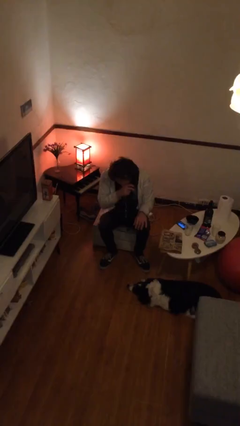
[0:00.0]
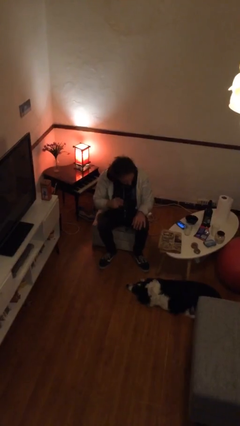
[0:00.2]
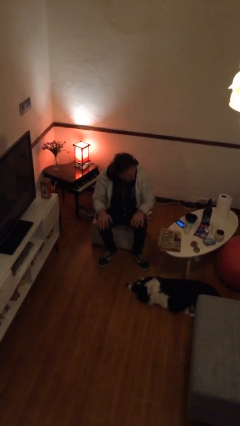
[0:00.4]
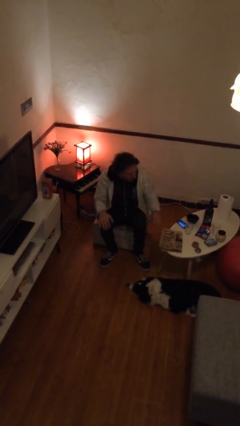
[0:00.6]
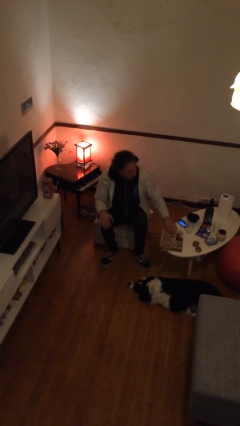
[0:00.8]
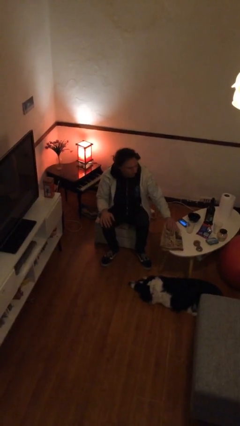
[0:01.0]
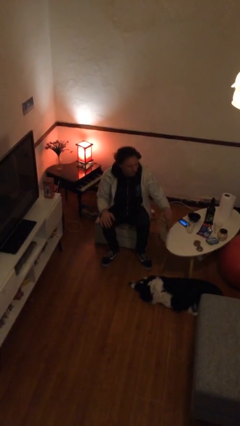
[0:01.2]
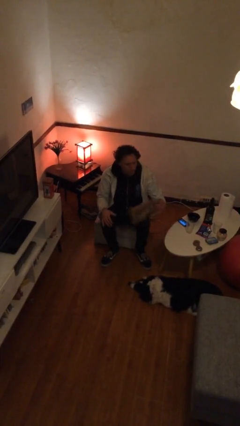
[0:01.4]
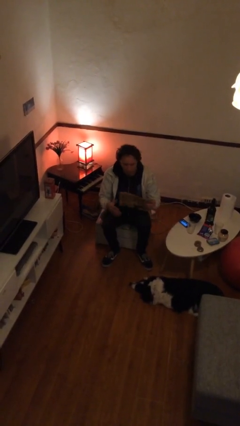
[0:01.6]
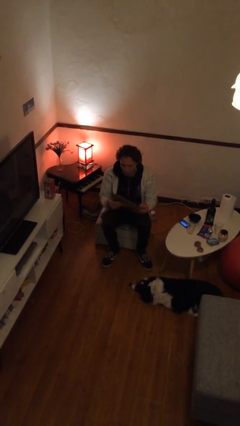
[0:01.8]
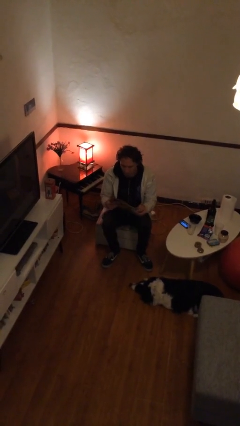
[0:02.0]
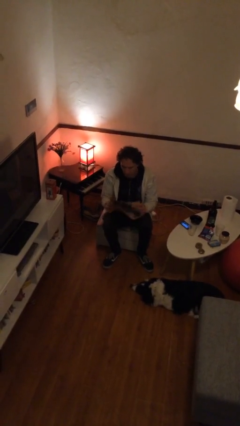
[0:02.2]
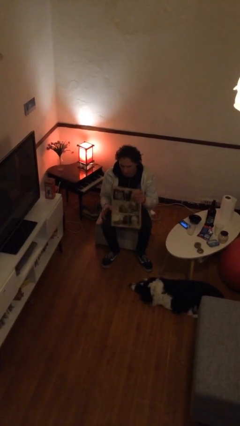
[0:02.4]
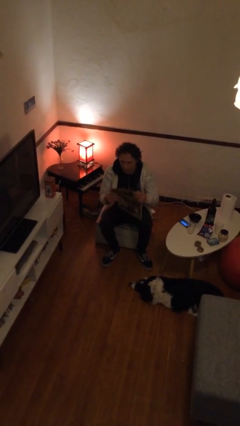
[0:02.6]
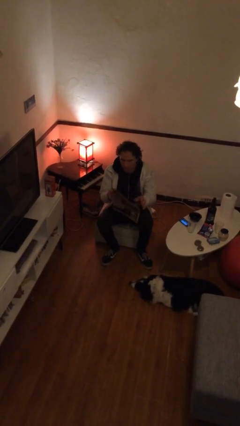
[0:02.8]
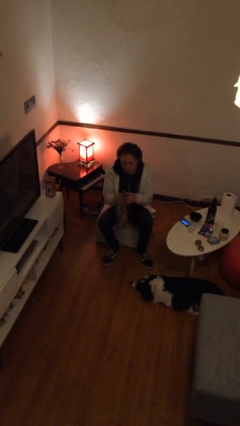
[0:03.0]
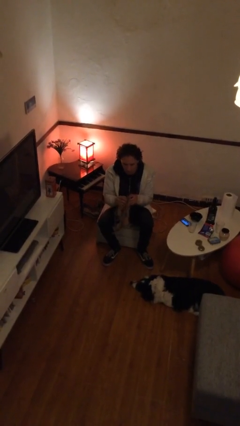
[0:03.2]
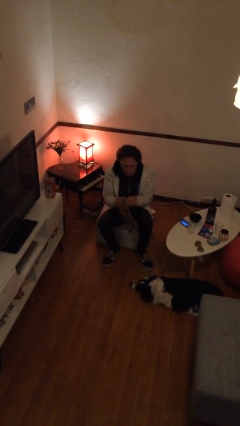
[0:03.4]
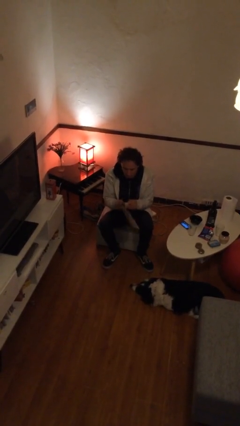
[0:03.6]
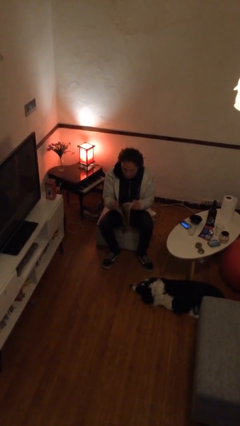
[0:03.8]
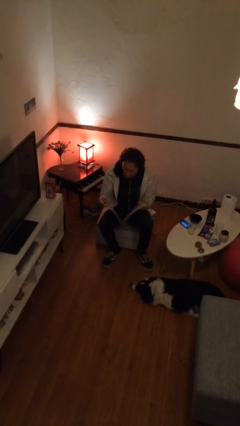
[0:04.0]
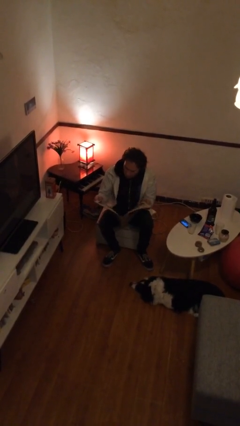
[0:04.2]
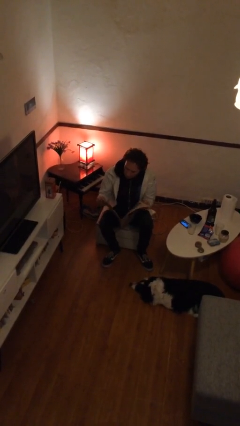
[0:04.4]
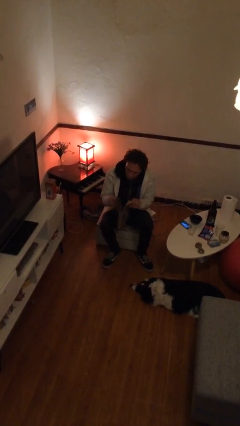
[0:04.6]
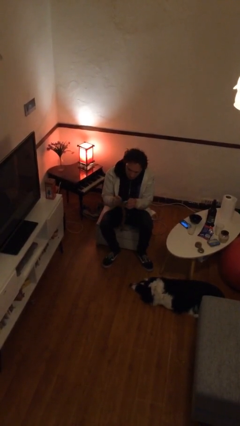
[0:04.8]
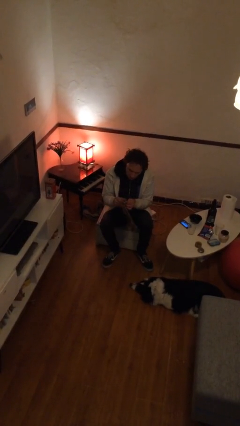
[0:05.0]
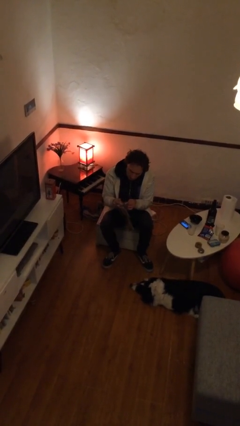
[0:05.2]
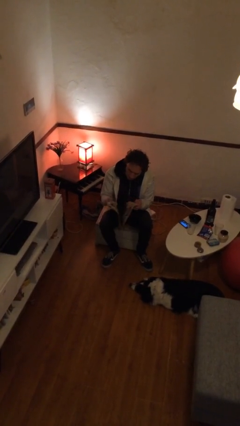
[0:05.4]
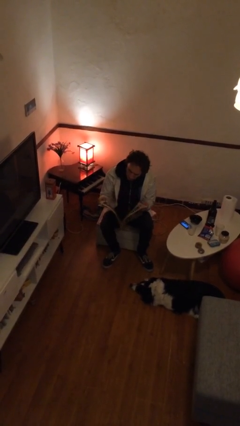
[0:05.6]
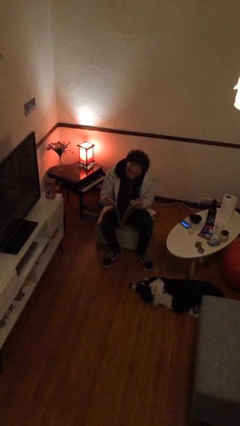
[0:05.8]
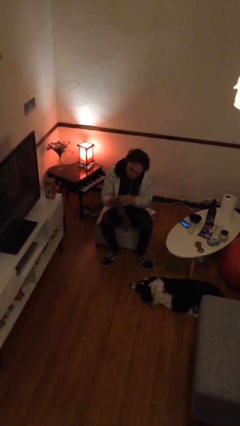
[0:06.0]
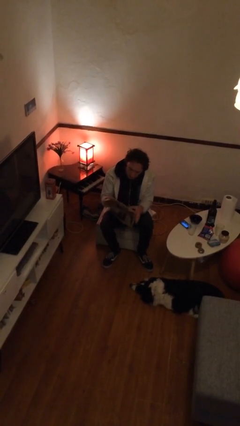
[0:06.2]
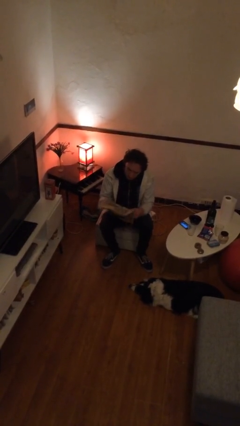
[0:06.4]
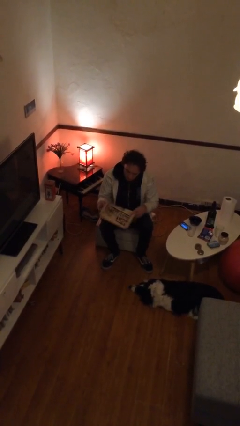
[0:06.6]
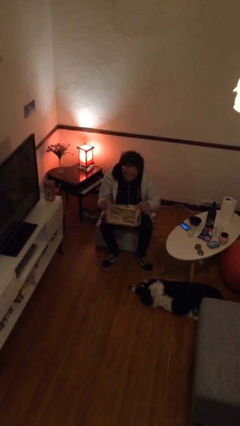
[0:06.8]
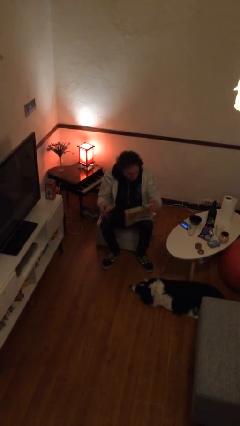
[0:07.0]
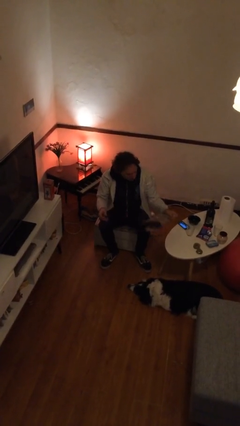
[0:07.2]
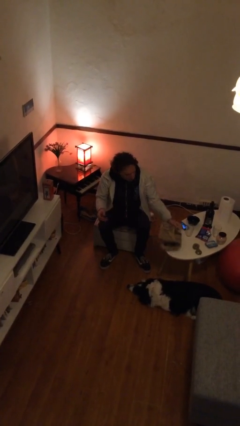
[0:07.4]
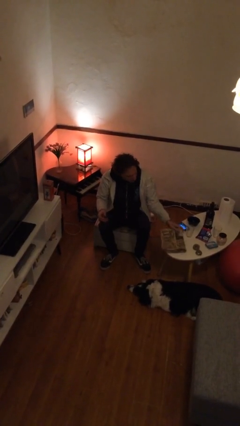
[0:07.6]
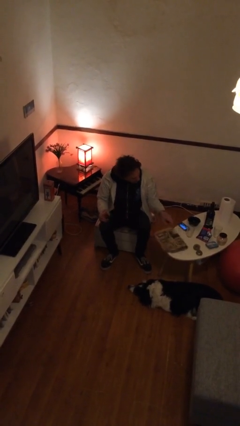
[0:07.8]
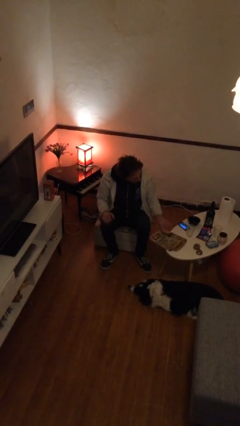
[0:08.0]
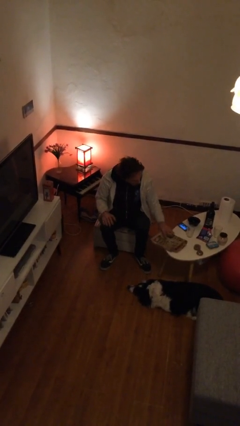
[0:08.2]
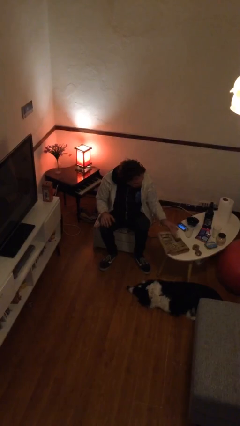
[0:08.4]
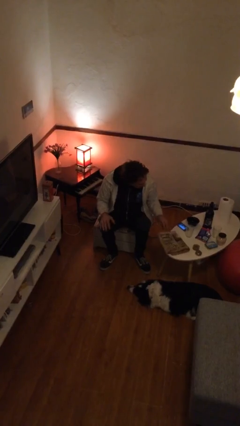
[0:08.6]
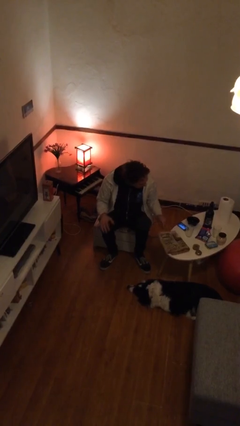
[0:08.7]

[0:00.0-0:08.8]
person reads newspaper

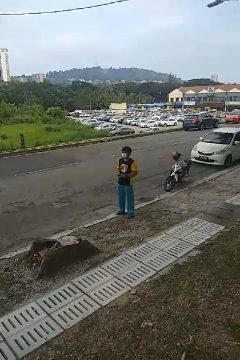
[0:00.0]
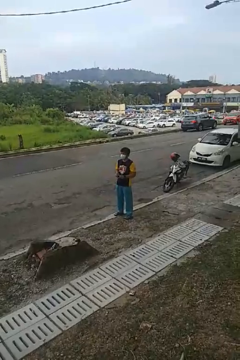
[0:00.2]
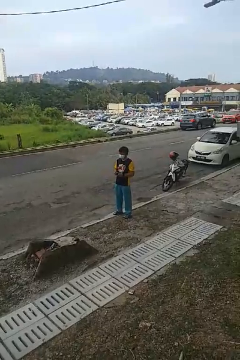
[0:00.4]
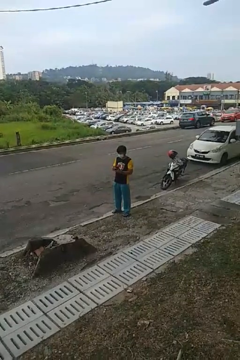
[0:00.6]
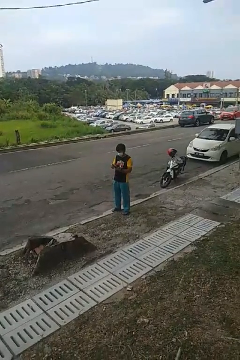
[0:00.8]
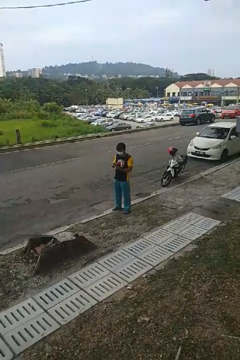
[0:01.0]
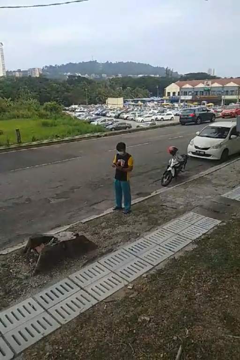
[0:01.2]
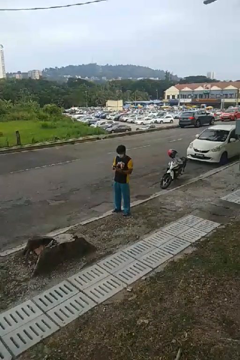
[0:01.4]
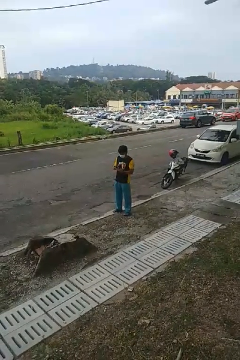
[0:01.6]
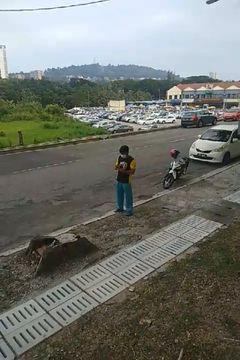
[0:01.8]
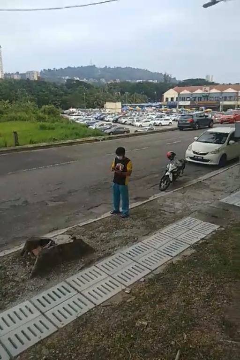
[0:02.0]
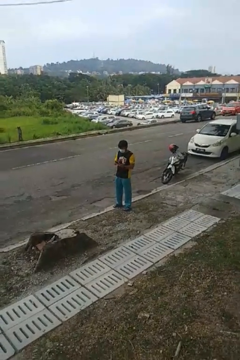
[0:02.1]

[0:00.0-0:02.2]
person searches in purse

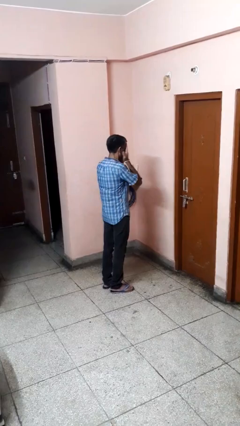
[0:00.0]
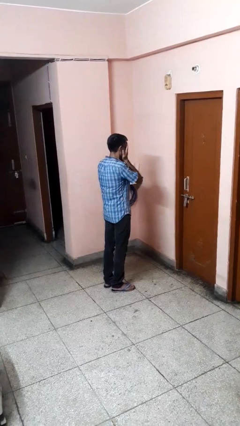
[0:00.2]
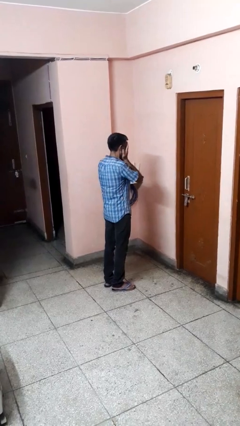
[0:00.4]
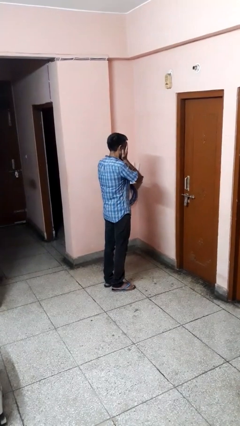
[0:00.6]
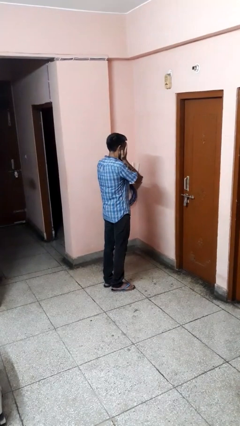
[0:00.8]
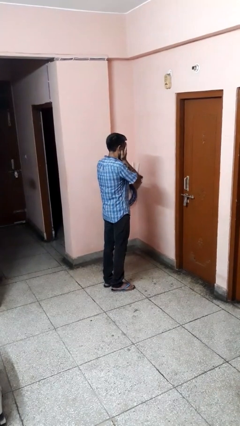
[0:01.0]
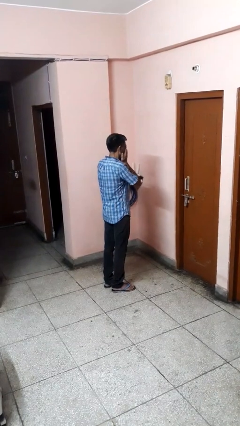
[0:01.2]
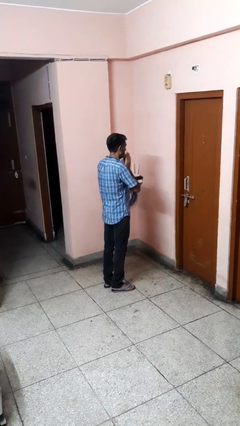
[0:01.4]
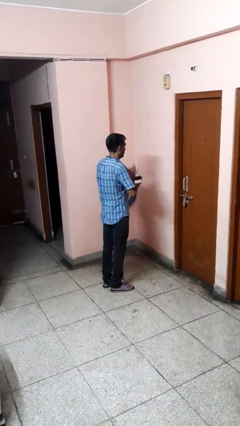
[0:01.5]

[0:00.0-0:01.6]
person covers face with hands

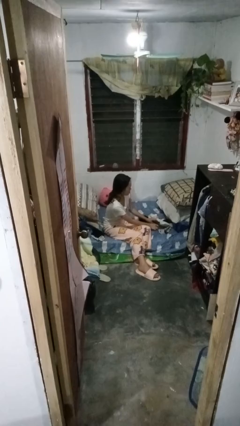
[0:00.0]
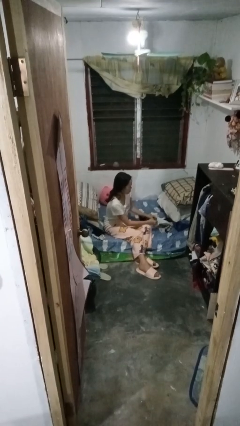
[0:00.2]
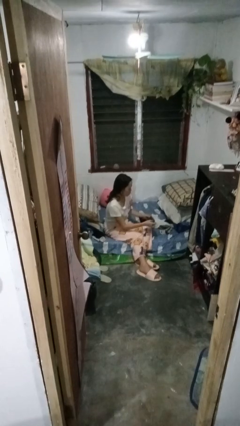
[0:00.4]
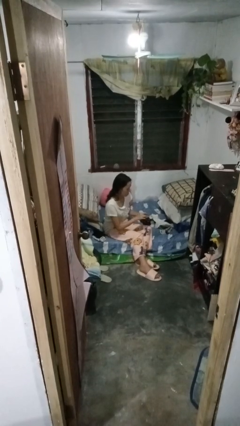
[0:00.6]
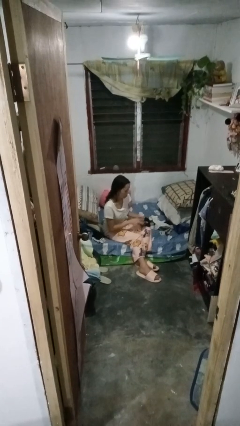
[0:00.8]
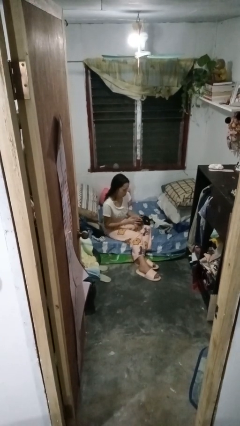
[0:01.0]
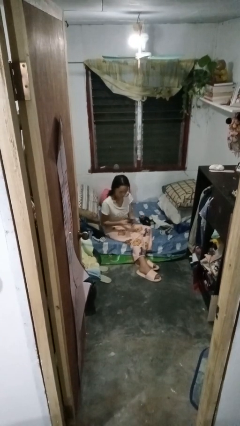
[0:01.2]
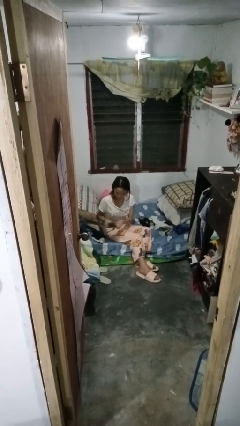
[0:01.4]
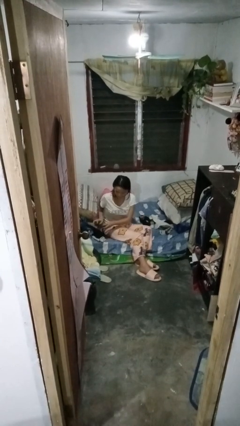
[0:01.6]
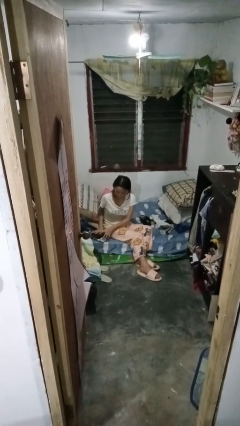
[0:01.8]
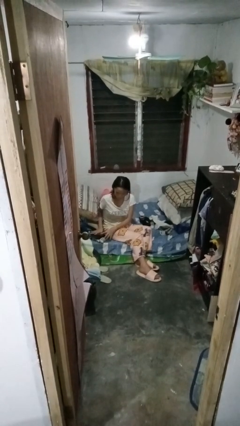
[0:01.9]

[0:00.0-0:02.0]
person folds socks

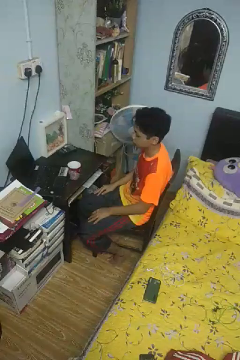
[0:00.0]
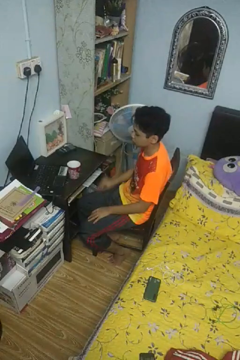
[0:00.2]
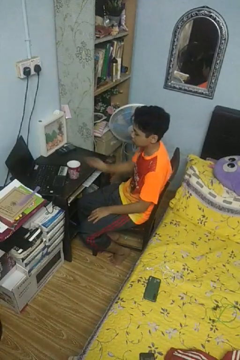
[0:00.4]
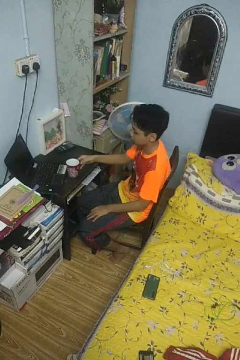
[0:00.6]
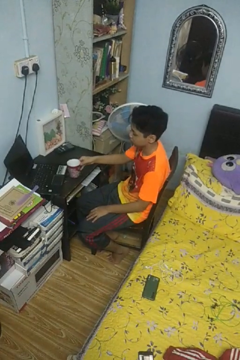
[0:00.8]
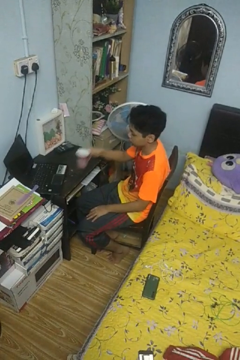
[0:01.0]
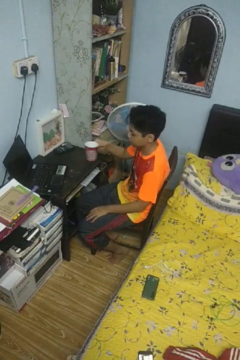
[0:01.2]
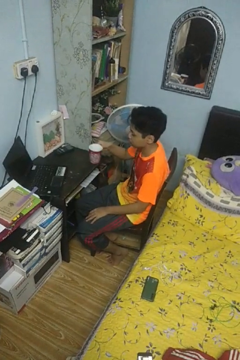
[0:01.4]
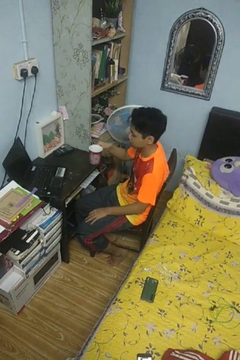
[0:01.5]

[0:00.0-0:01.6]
person opens refrigerator

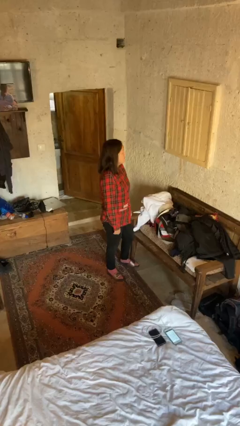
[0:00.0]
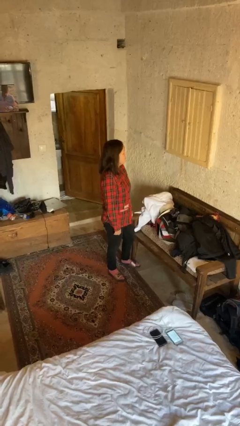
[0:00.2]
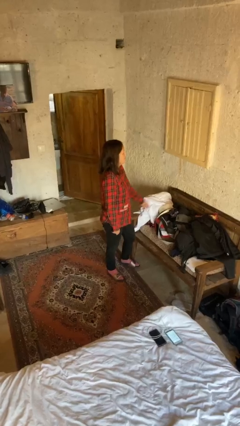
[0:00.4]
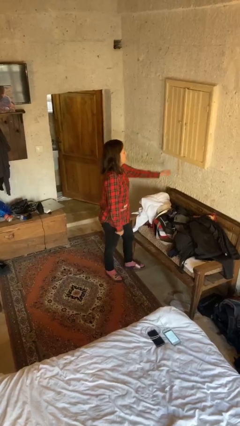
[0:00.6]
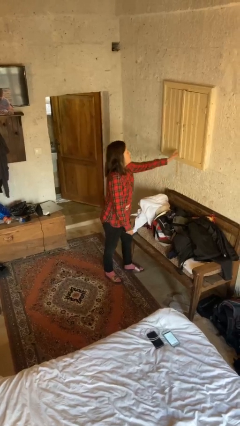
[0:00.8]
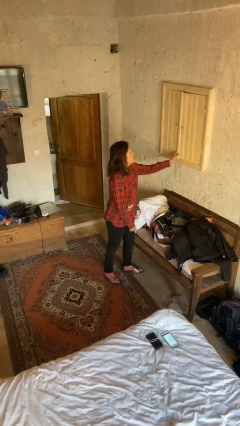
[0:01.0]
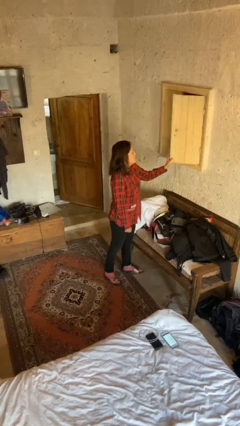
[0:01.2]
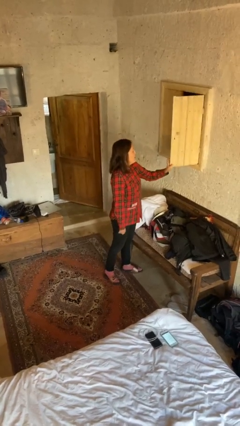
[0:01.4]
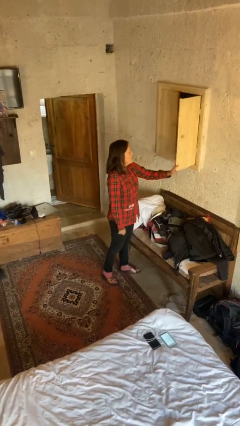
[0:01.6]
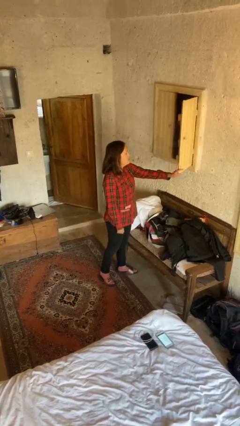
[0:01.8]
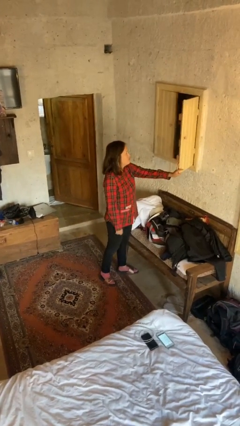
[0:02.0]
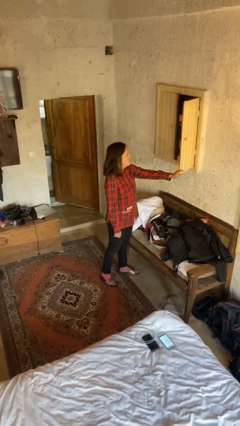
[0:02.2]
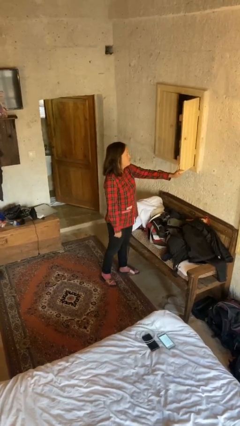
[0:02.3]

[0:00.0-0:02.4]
person opens closet door
